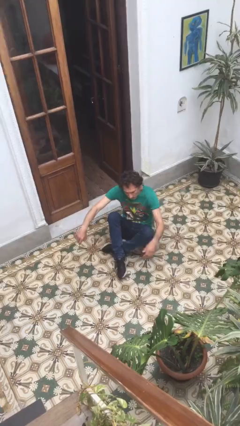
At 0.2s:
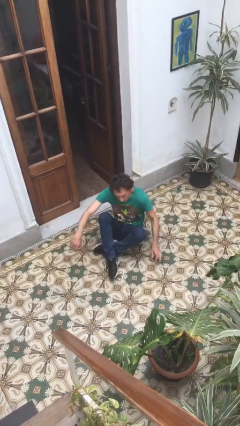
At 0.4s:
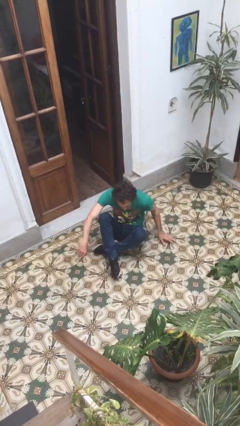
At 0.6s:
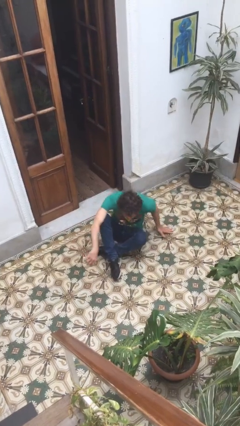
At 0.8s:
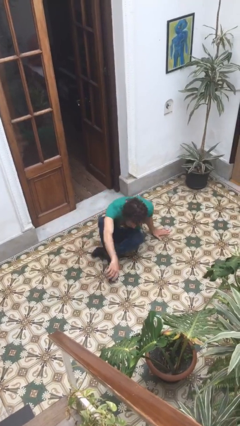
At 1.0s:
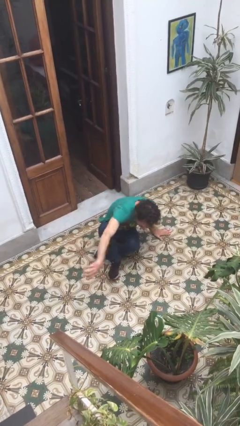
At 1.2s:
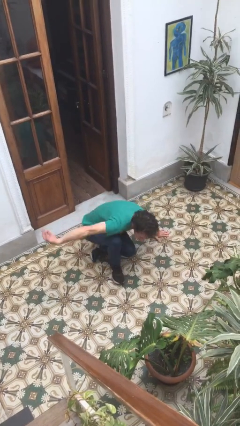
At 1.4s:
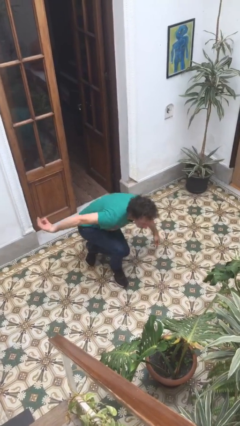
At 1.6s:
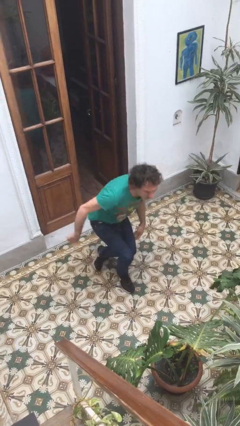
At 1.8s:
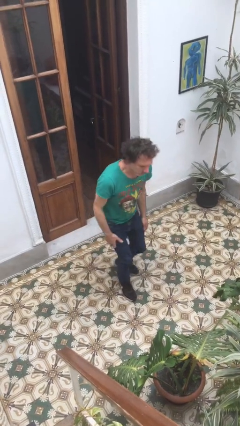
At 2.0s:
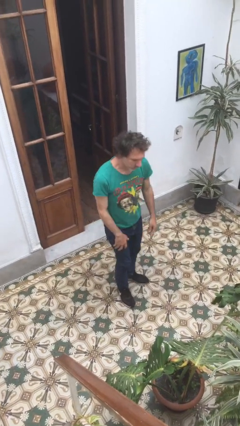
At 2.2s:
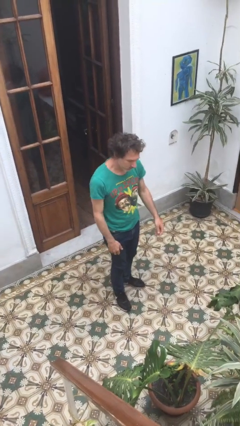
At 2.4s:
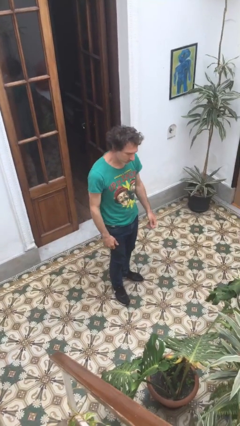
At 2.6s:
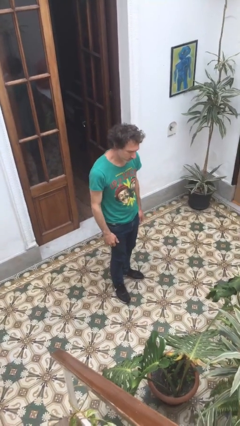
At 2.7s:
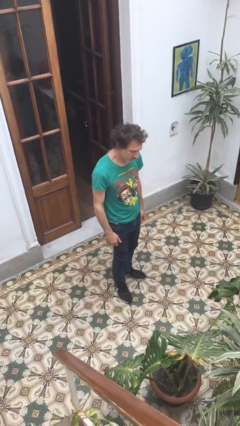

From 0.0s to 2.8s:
person stands up

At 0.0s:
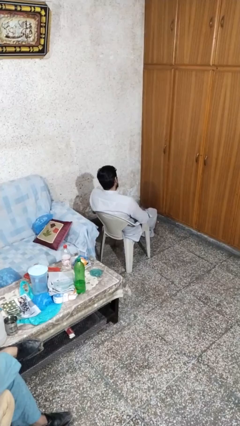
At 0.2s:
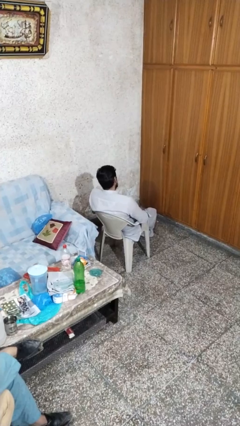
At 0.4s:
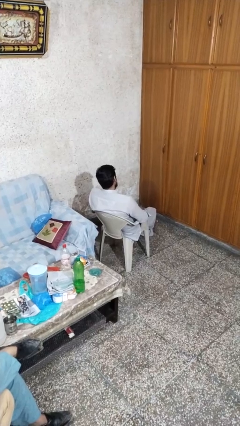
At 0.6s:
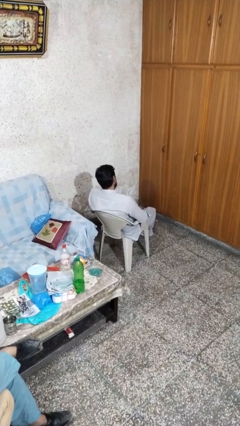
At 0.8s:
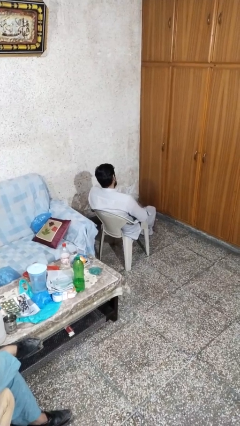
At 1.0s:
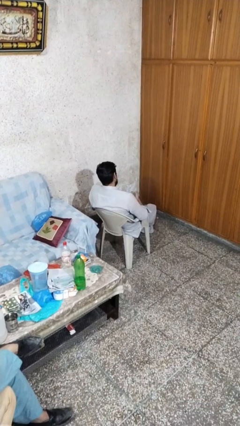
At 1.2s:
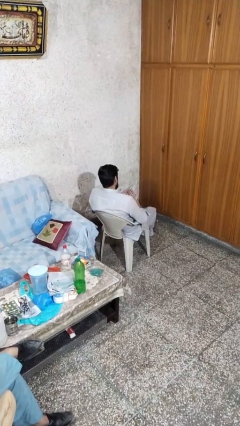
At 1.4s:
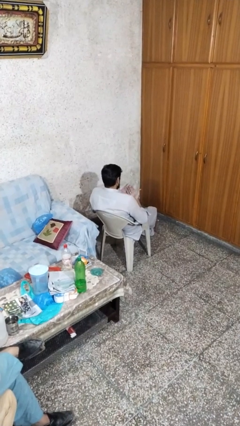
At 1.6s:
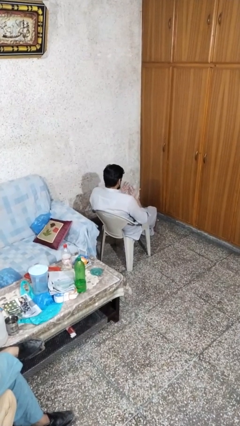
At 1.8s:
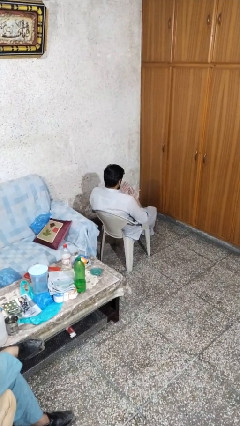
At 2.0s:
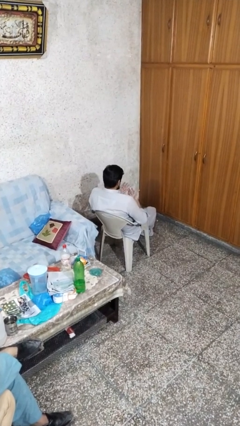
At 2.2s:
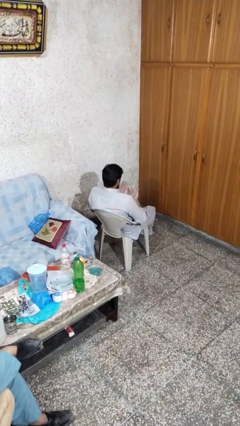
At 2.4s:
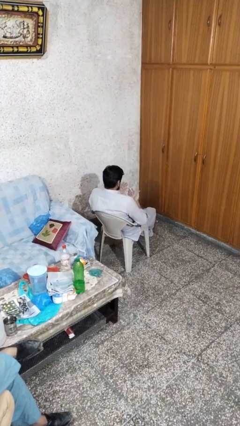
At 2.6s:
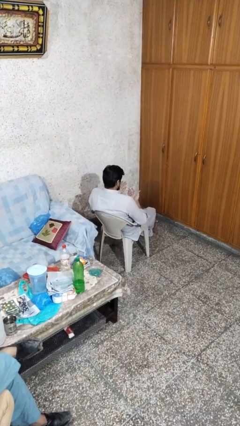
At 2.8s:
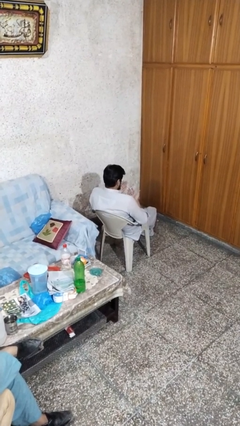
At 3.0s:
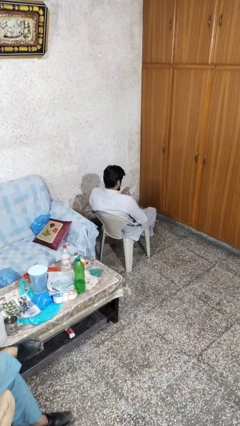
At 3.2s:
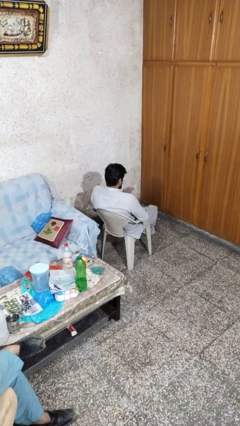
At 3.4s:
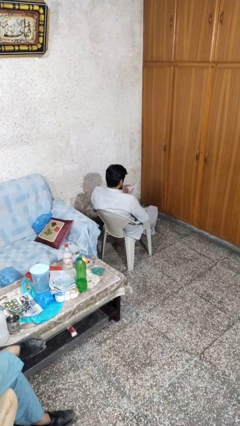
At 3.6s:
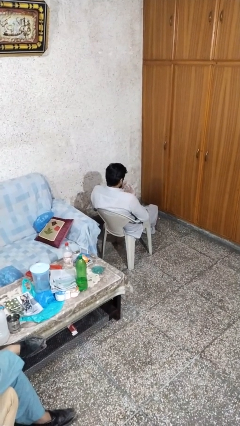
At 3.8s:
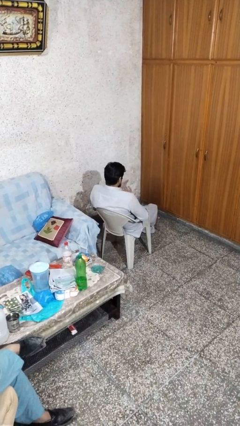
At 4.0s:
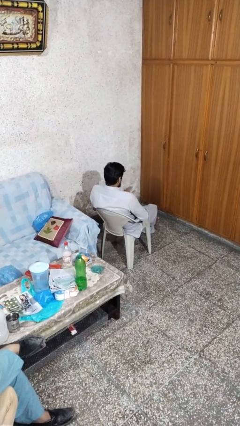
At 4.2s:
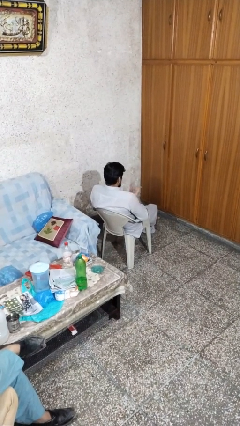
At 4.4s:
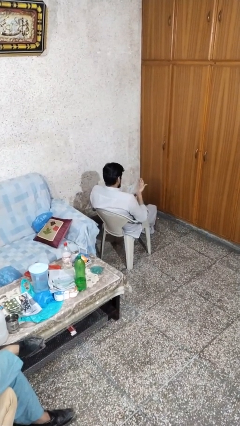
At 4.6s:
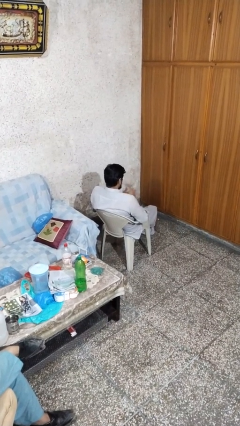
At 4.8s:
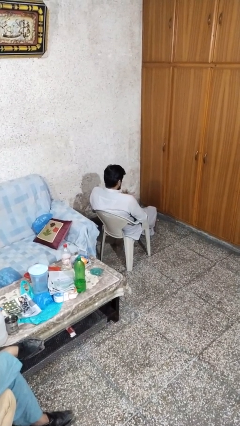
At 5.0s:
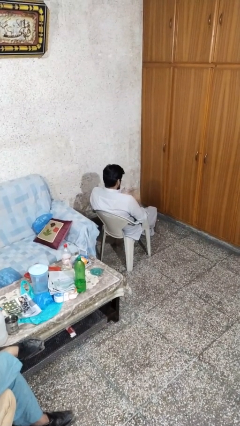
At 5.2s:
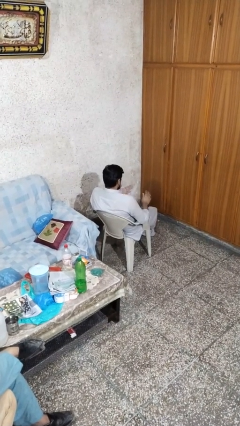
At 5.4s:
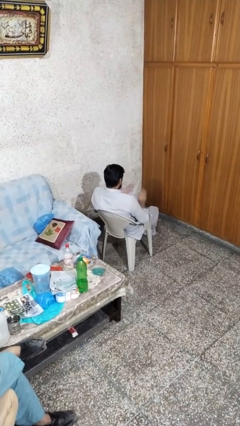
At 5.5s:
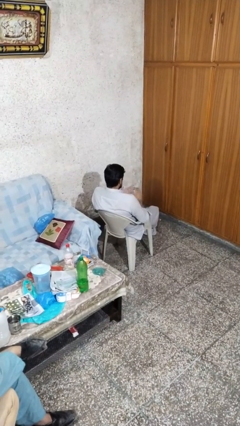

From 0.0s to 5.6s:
person looks at hands in lap

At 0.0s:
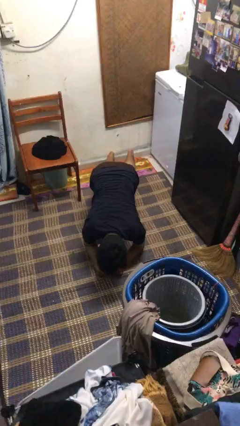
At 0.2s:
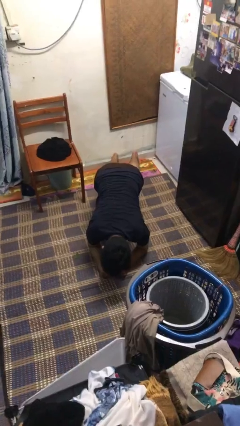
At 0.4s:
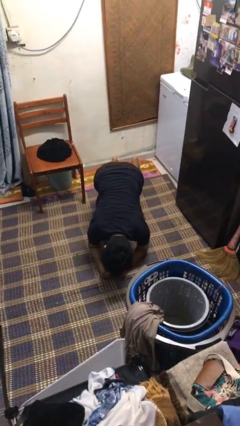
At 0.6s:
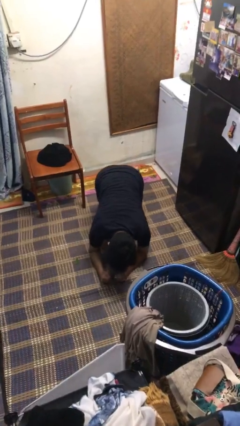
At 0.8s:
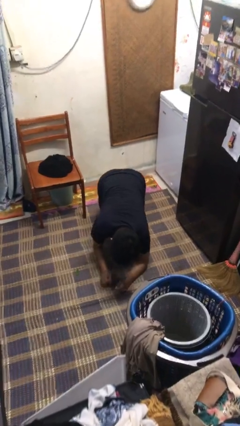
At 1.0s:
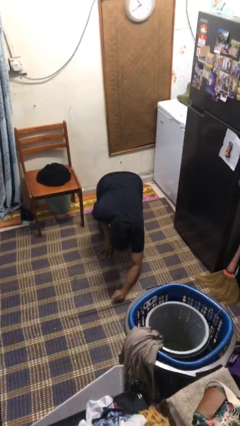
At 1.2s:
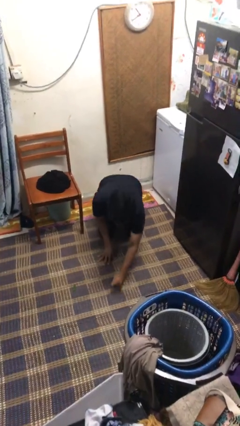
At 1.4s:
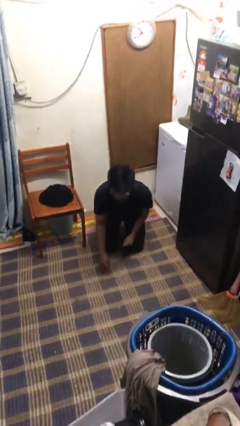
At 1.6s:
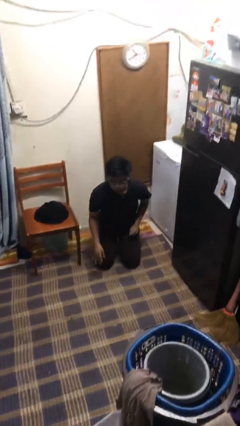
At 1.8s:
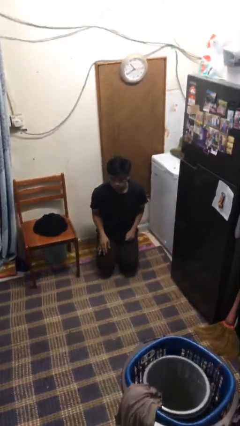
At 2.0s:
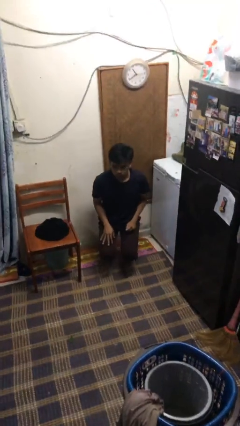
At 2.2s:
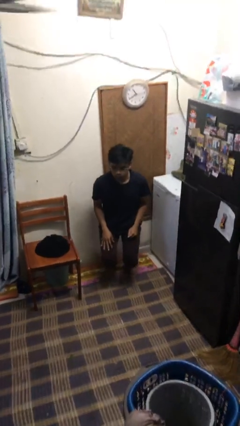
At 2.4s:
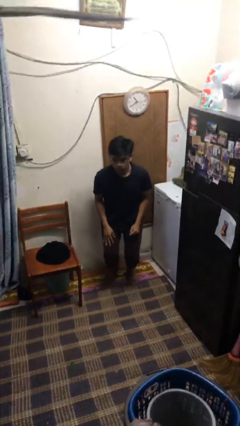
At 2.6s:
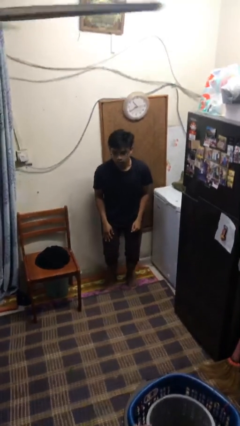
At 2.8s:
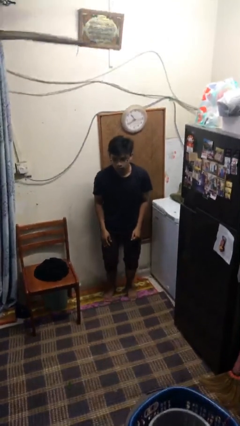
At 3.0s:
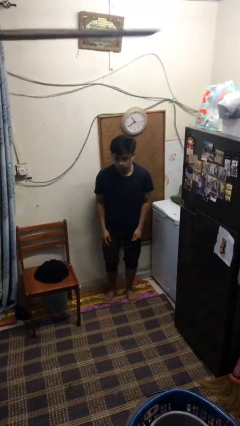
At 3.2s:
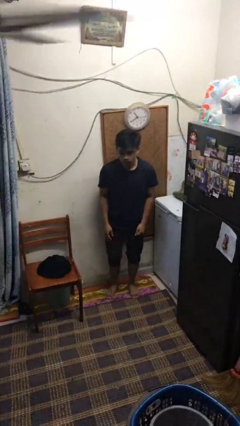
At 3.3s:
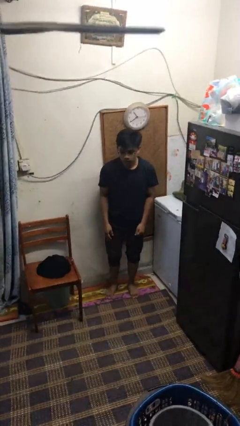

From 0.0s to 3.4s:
person stands up from floor

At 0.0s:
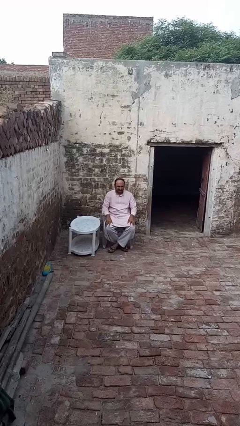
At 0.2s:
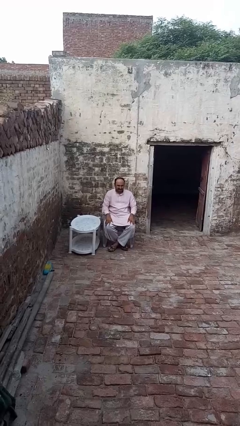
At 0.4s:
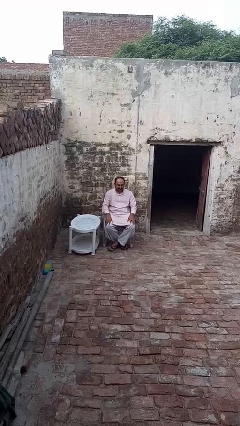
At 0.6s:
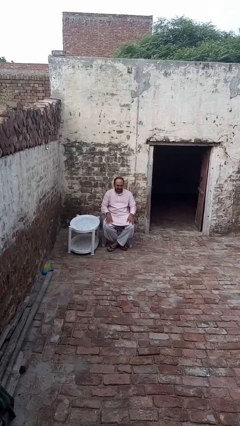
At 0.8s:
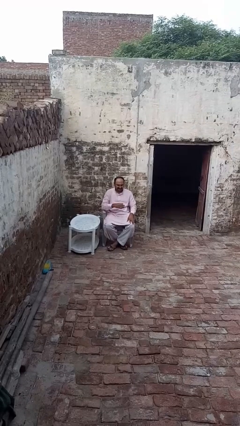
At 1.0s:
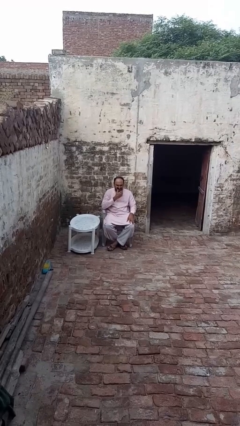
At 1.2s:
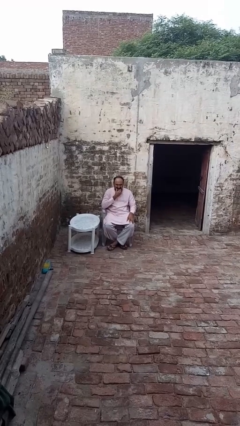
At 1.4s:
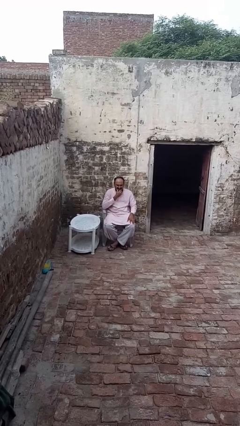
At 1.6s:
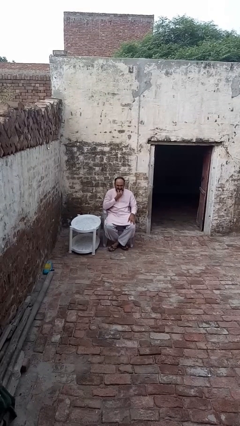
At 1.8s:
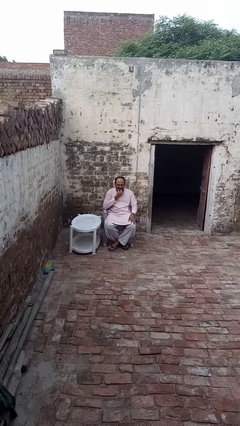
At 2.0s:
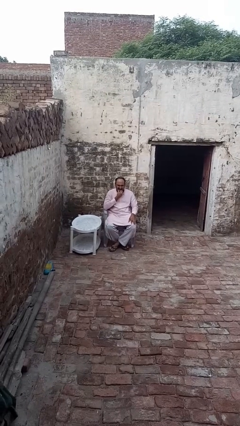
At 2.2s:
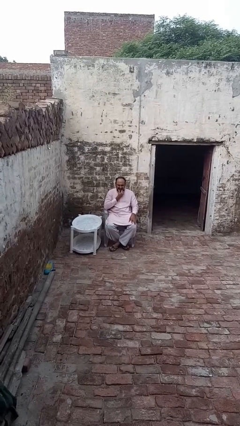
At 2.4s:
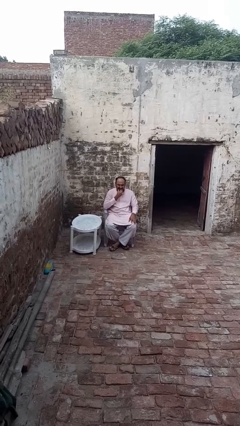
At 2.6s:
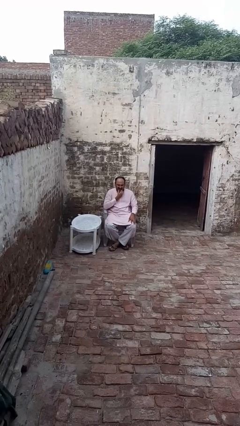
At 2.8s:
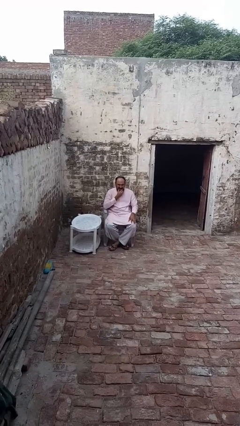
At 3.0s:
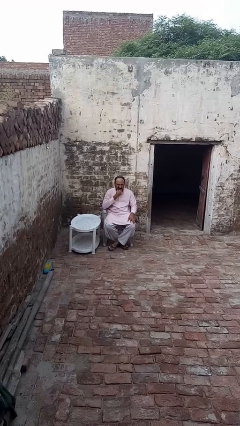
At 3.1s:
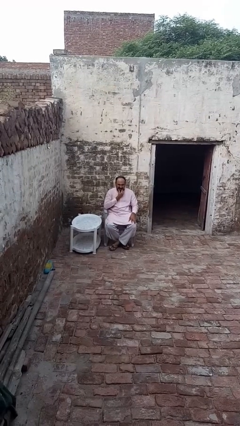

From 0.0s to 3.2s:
person strokes chin

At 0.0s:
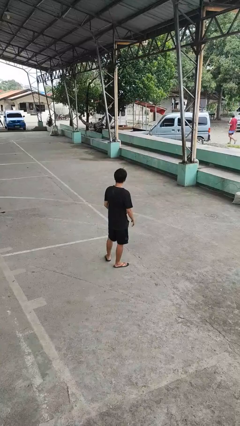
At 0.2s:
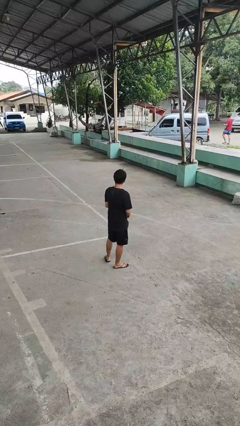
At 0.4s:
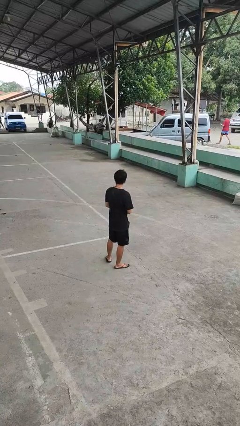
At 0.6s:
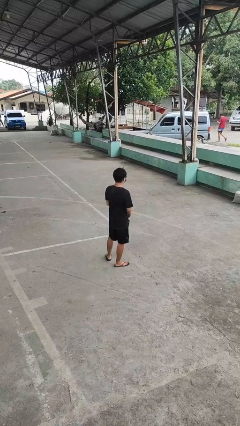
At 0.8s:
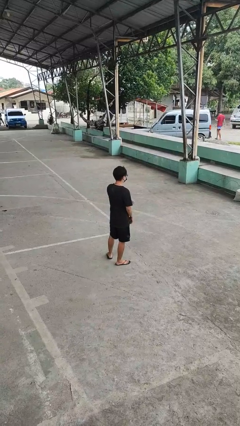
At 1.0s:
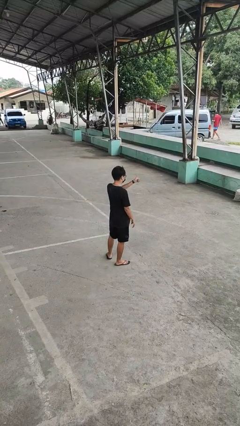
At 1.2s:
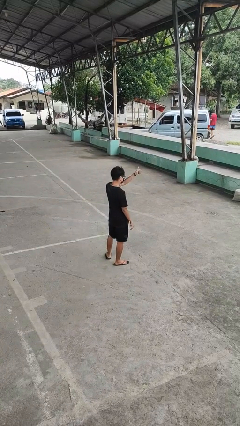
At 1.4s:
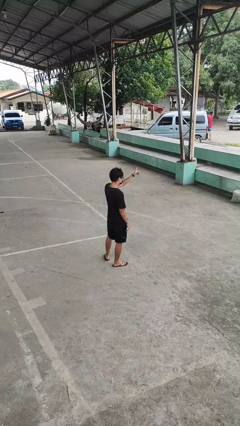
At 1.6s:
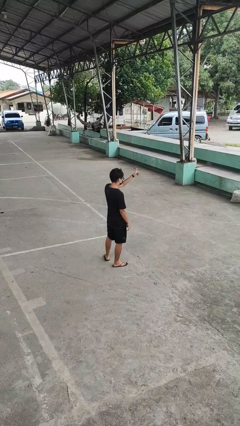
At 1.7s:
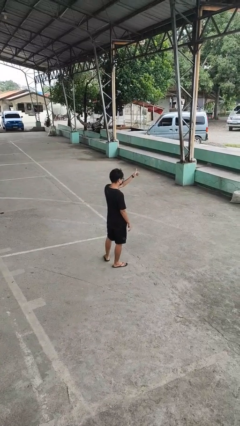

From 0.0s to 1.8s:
person gestures thumbs up

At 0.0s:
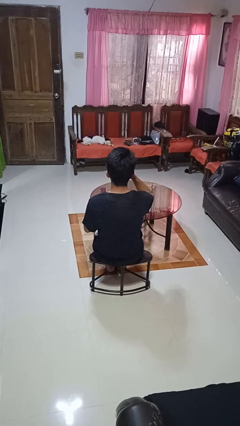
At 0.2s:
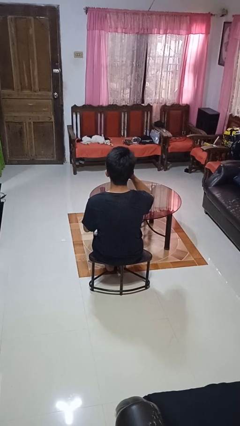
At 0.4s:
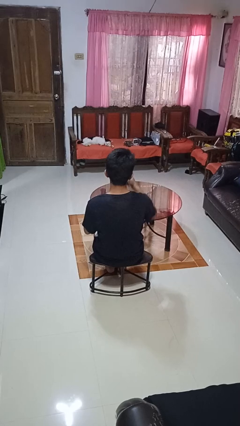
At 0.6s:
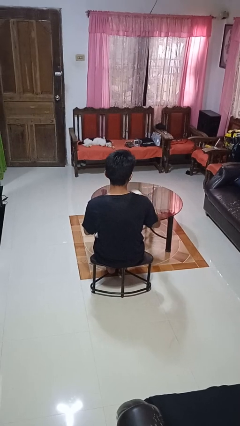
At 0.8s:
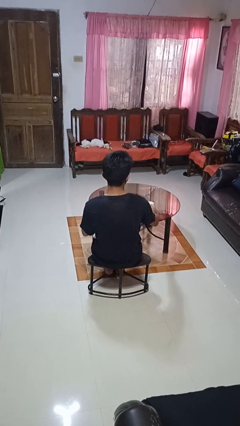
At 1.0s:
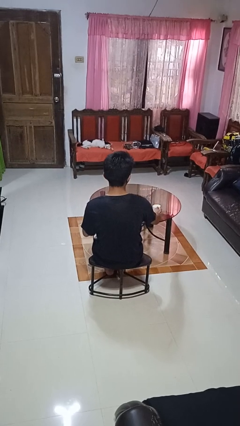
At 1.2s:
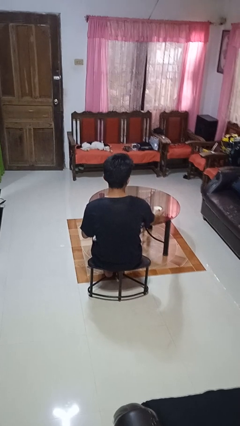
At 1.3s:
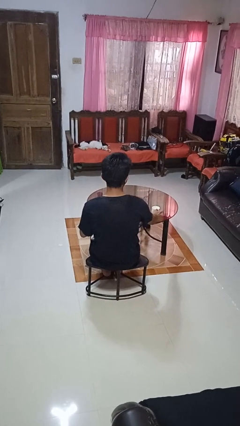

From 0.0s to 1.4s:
person puts down object on table
